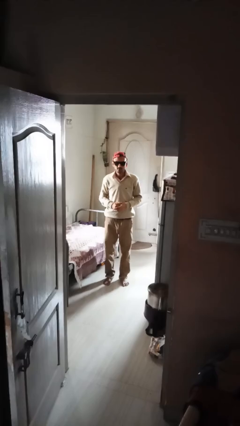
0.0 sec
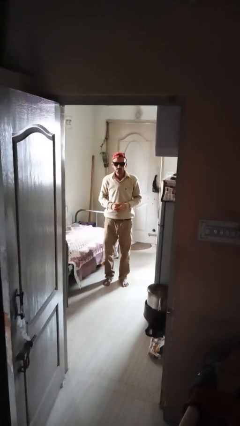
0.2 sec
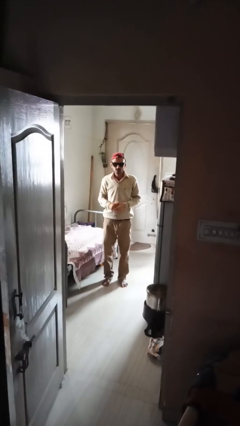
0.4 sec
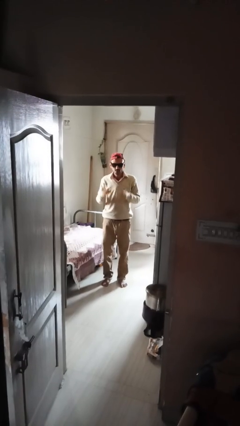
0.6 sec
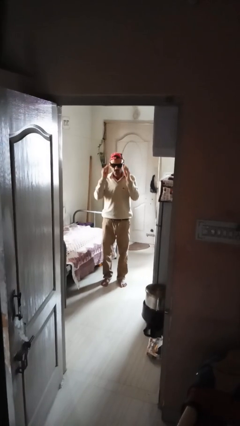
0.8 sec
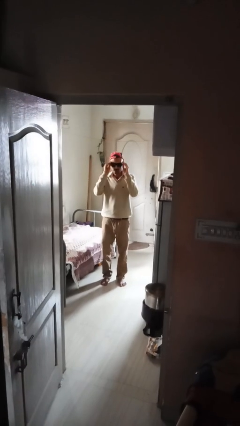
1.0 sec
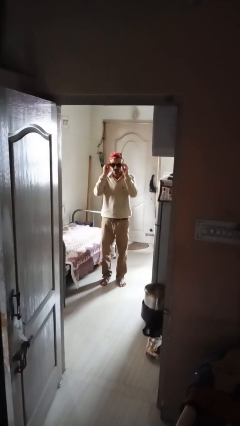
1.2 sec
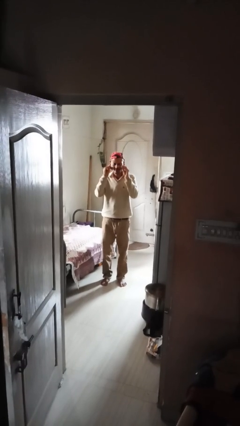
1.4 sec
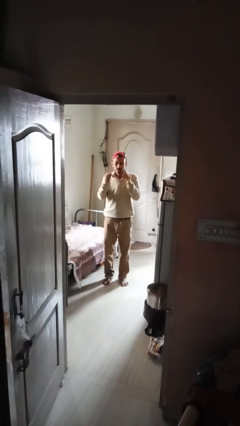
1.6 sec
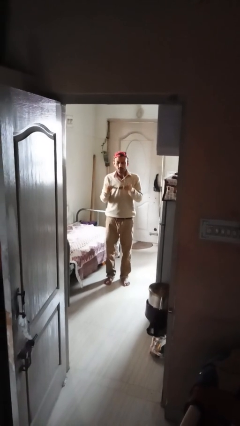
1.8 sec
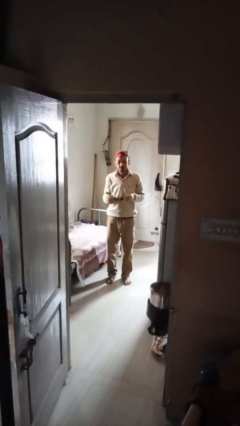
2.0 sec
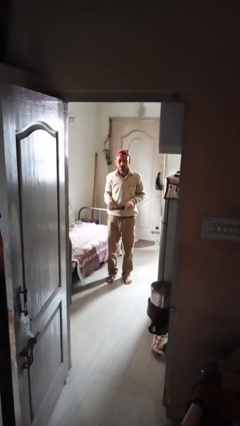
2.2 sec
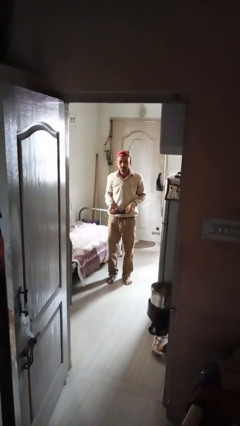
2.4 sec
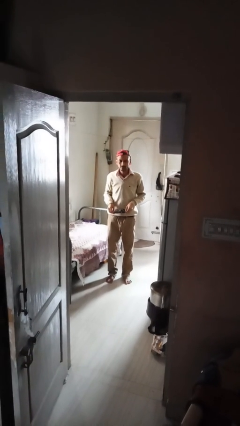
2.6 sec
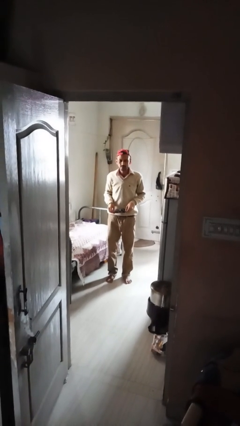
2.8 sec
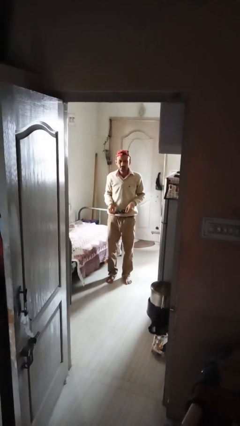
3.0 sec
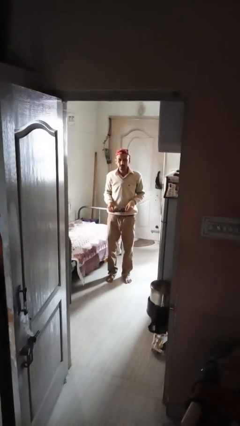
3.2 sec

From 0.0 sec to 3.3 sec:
person takes off sunglasses

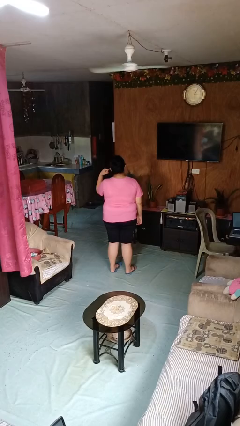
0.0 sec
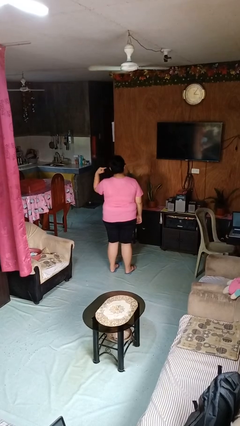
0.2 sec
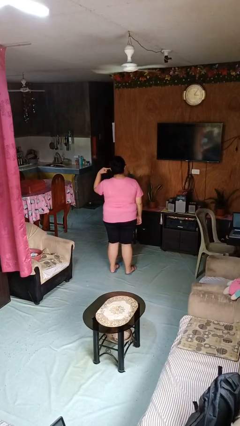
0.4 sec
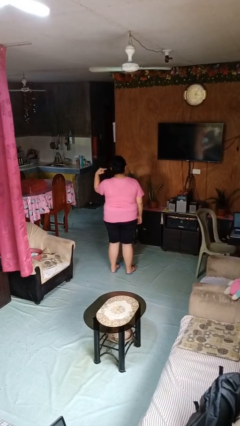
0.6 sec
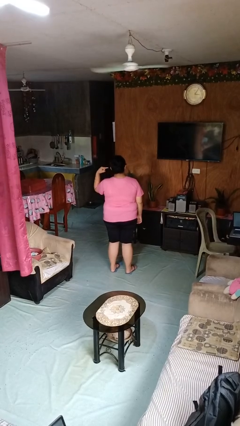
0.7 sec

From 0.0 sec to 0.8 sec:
person gestures listen closely

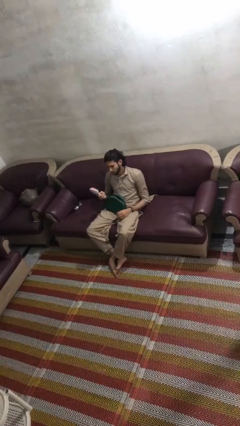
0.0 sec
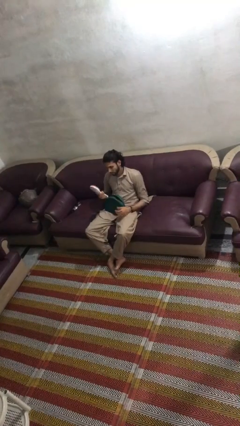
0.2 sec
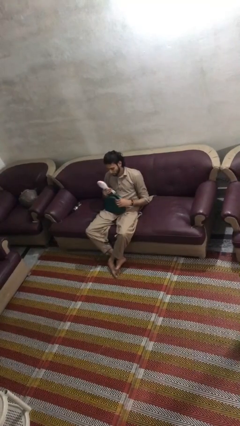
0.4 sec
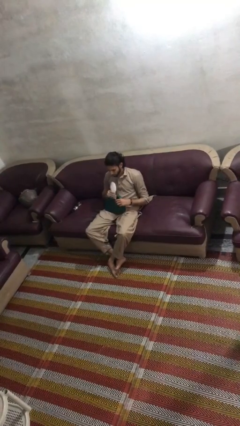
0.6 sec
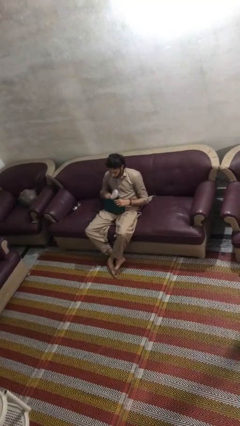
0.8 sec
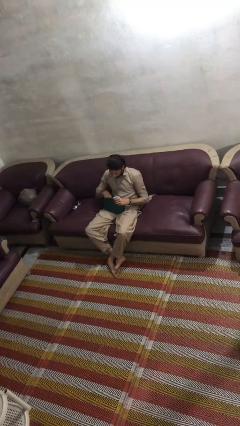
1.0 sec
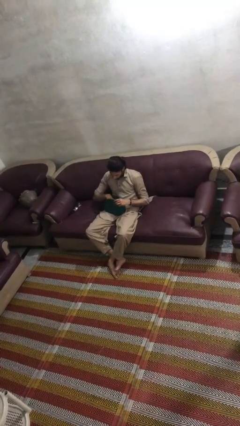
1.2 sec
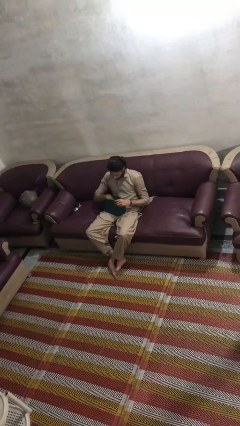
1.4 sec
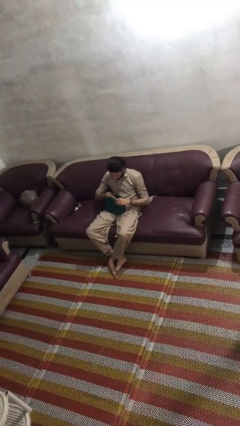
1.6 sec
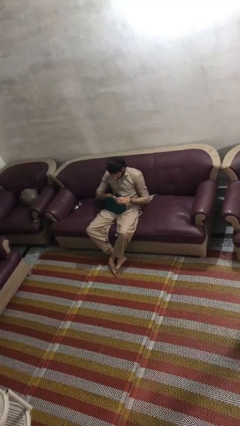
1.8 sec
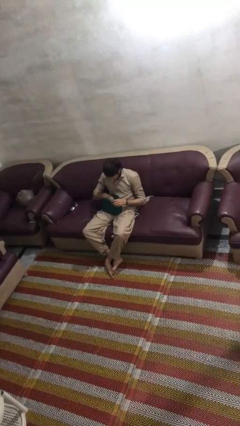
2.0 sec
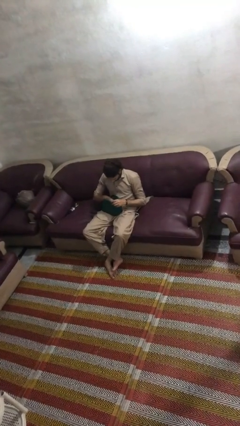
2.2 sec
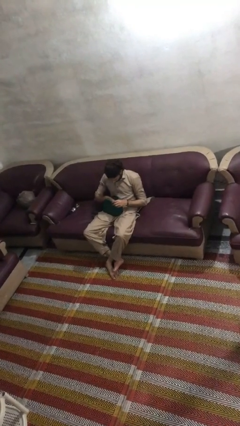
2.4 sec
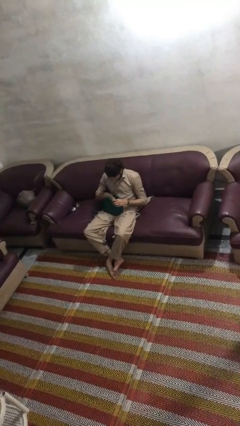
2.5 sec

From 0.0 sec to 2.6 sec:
person puts object into purse

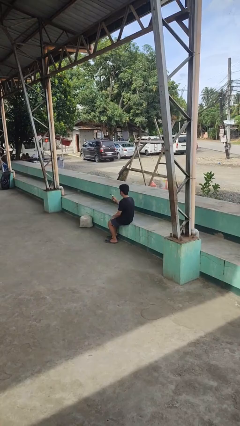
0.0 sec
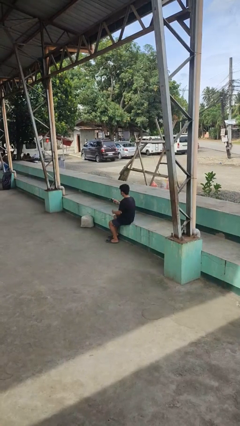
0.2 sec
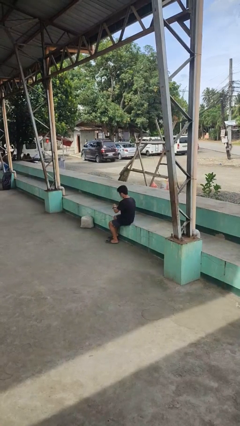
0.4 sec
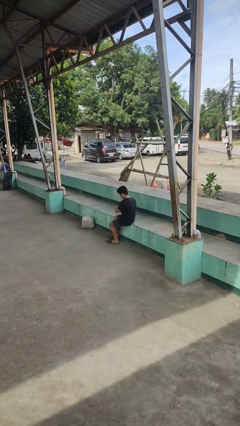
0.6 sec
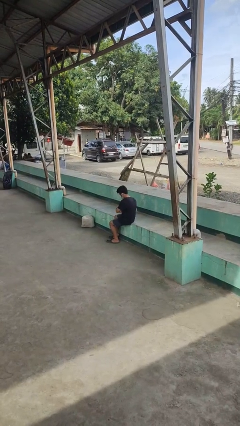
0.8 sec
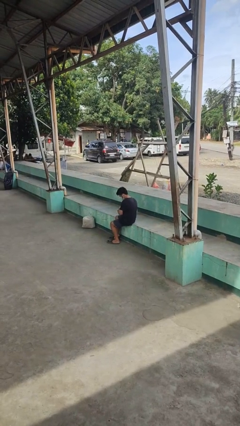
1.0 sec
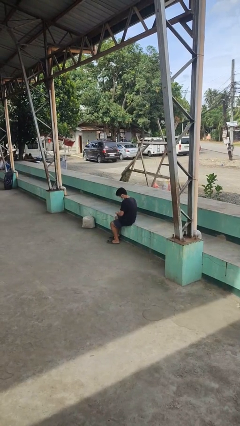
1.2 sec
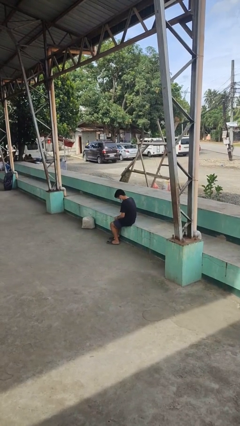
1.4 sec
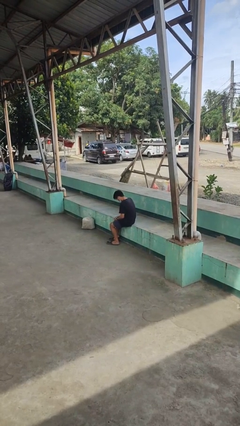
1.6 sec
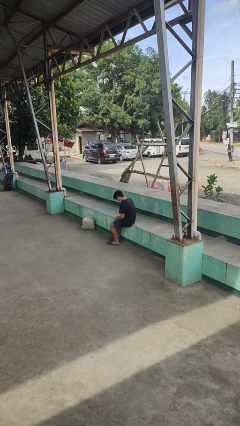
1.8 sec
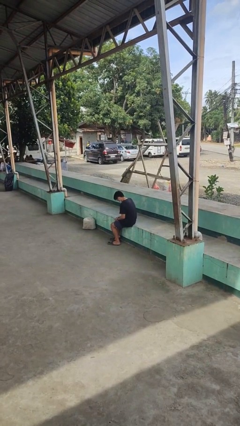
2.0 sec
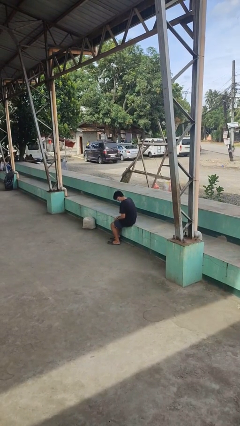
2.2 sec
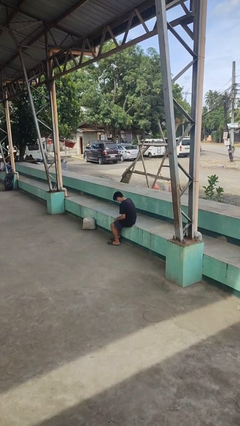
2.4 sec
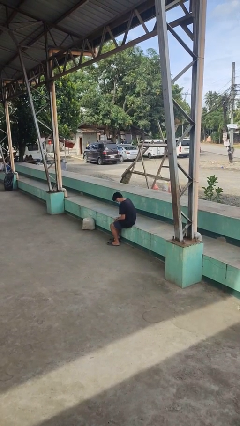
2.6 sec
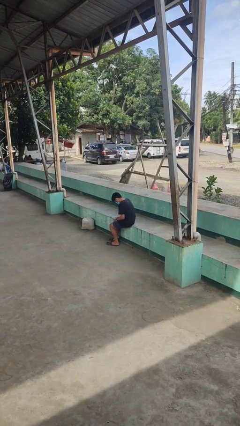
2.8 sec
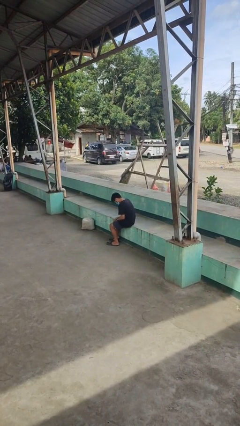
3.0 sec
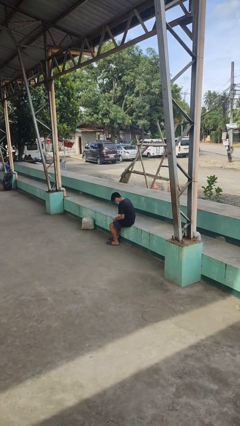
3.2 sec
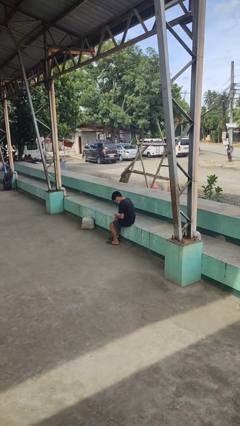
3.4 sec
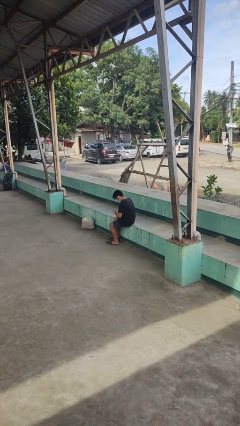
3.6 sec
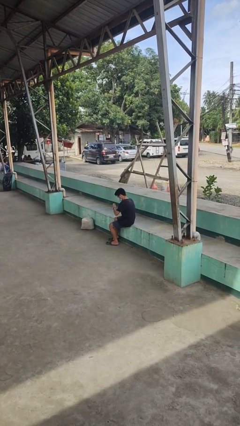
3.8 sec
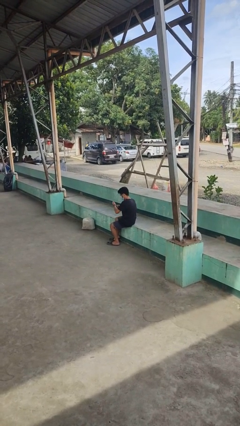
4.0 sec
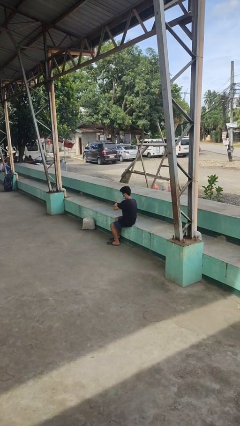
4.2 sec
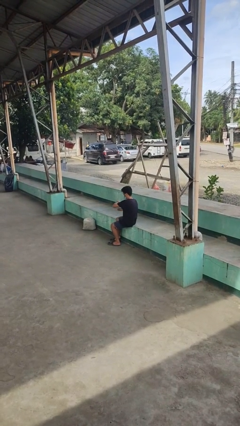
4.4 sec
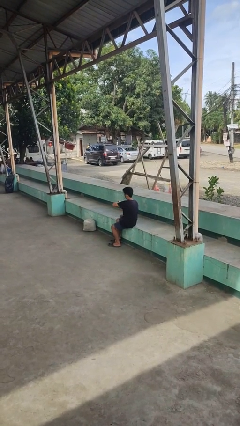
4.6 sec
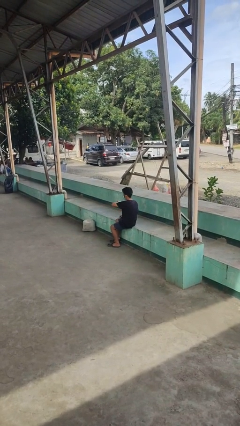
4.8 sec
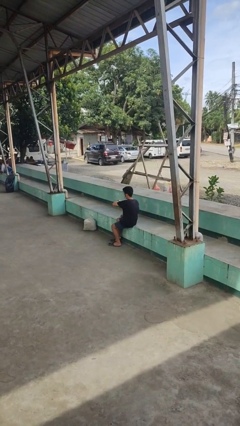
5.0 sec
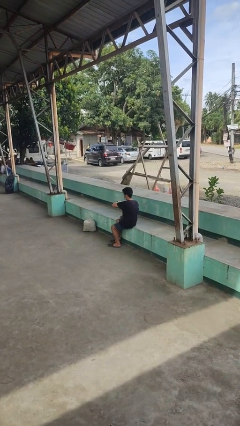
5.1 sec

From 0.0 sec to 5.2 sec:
person puts on wristwatch

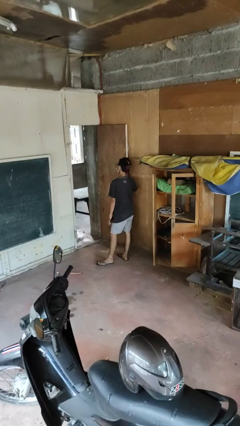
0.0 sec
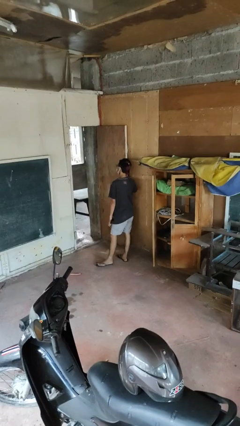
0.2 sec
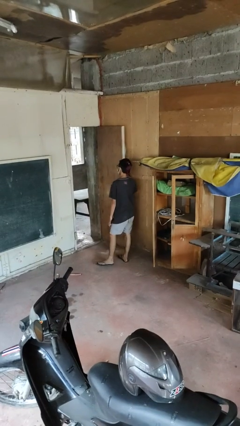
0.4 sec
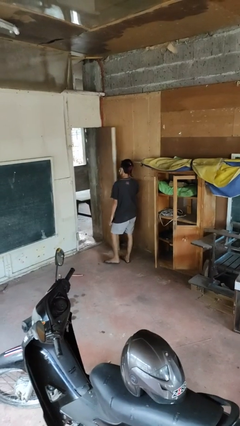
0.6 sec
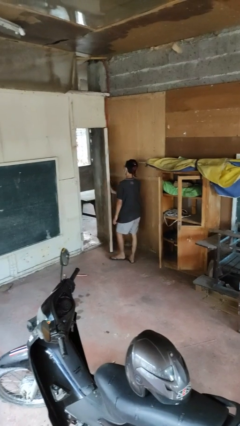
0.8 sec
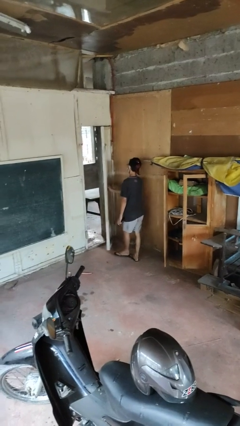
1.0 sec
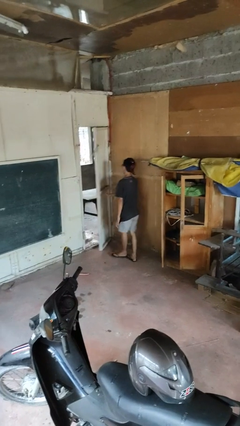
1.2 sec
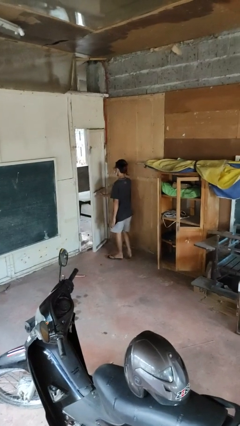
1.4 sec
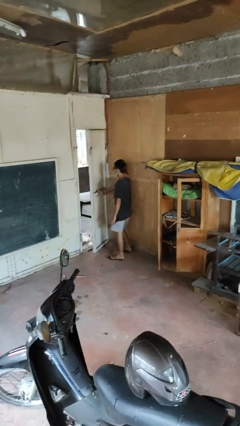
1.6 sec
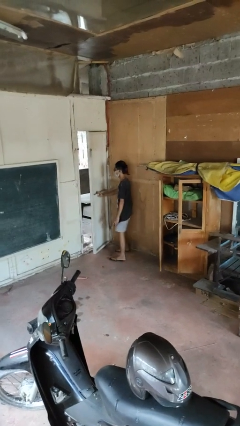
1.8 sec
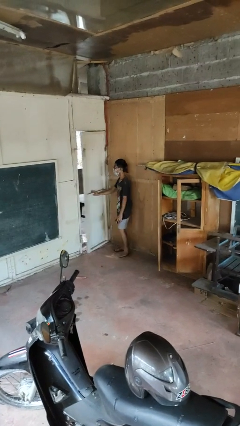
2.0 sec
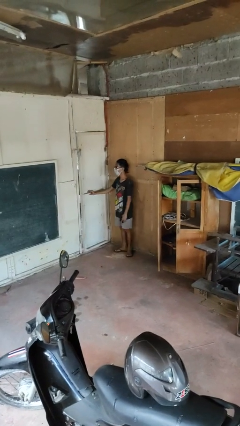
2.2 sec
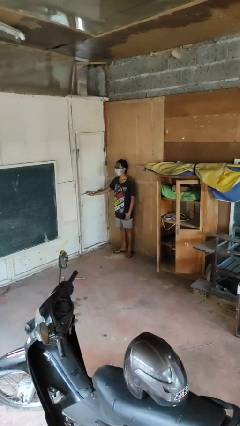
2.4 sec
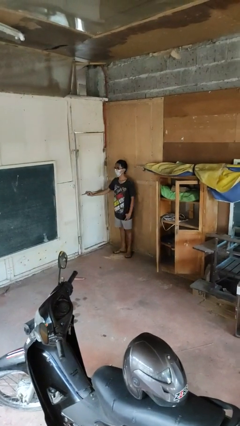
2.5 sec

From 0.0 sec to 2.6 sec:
person closes facility door

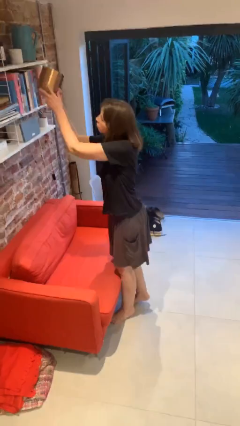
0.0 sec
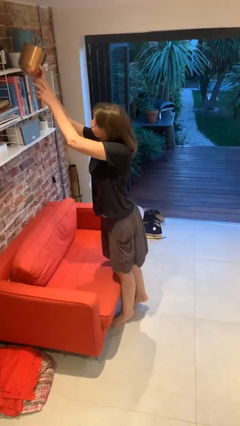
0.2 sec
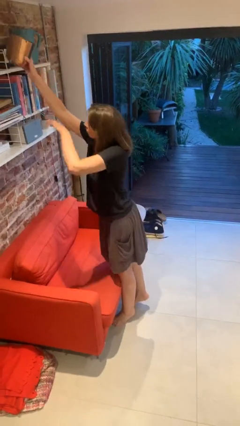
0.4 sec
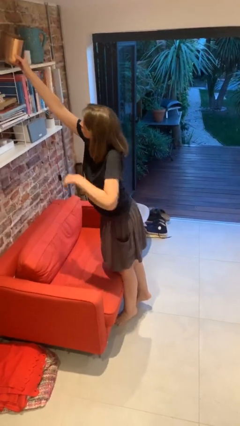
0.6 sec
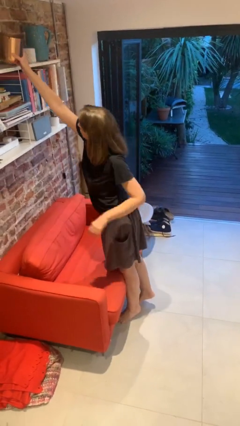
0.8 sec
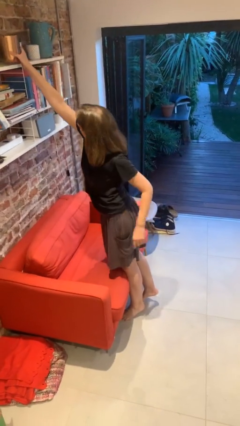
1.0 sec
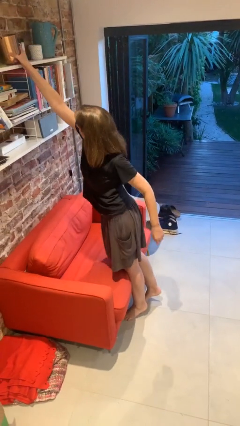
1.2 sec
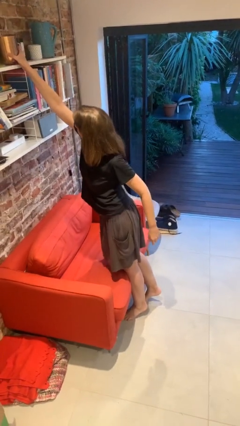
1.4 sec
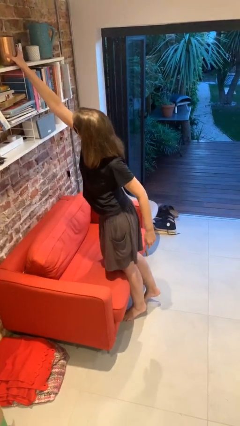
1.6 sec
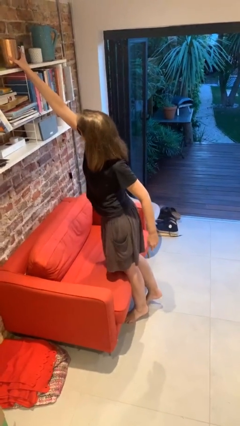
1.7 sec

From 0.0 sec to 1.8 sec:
person puts down object on shelf

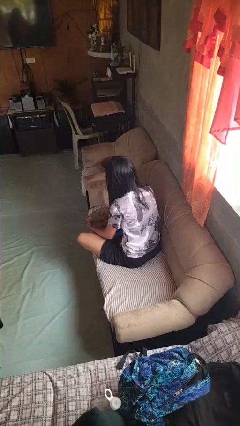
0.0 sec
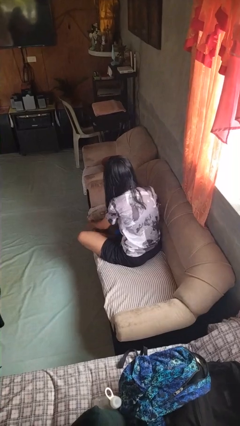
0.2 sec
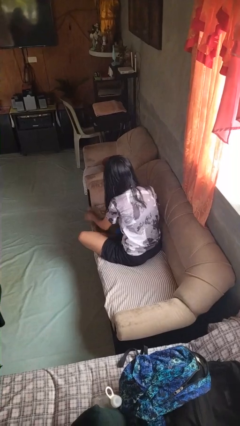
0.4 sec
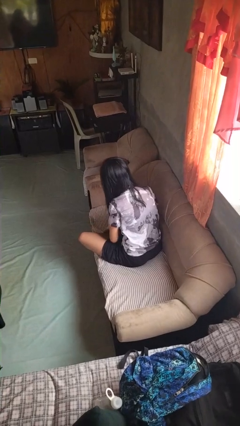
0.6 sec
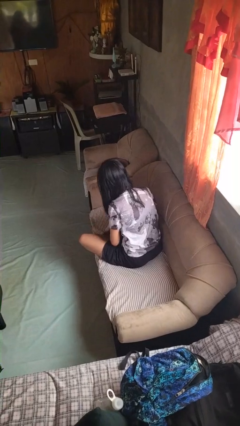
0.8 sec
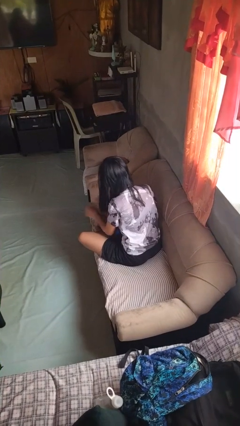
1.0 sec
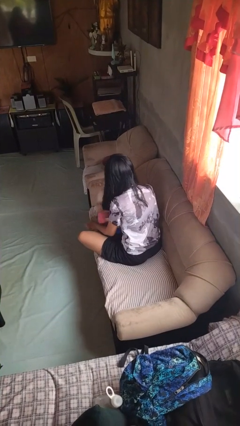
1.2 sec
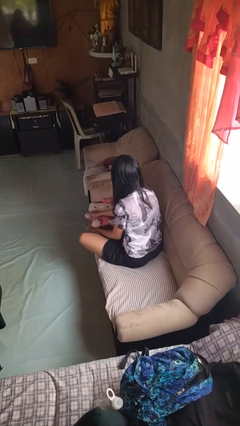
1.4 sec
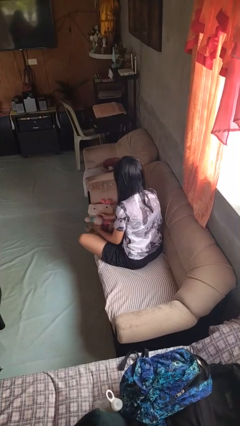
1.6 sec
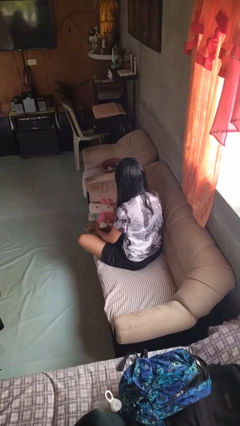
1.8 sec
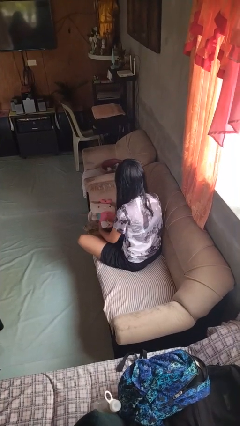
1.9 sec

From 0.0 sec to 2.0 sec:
person searches in couch
